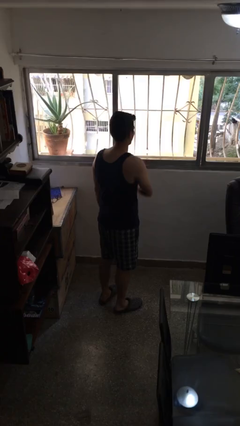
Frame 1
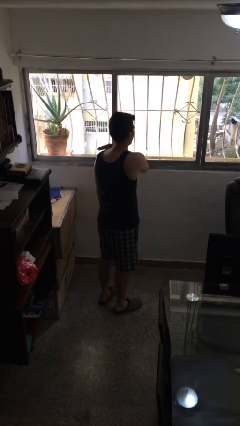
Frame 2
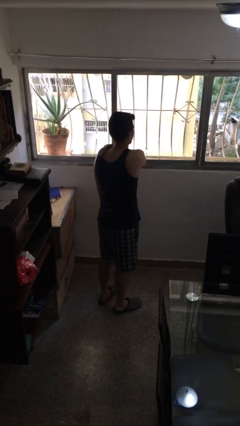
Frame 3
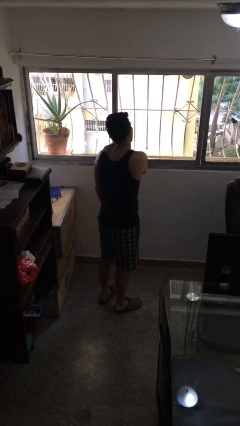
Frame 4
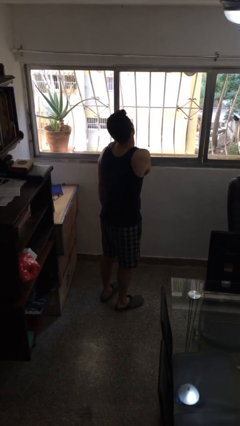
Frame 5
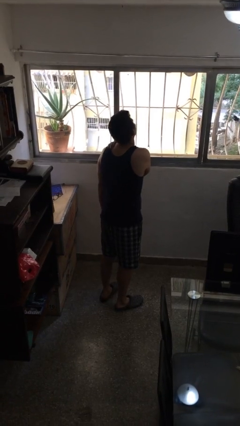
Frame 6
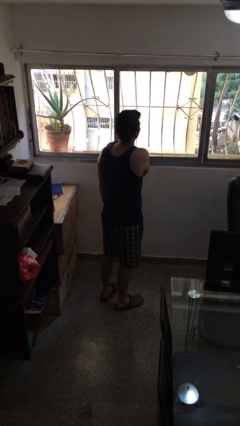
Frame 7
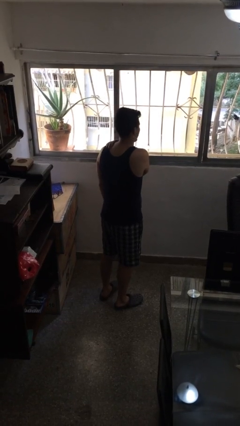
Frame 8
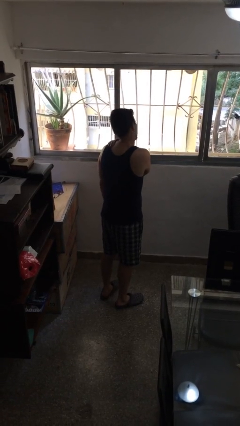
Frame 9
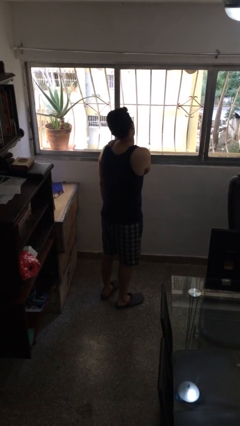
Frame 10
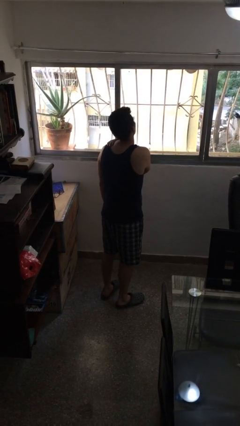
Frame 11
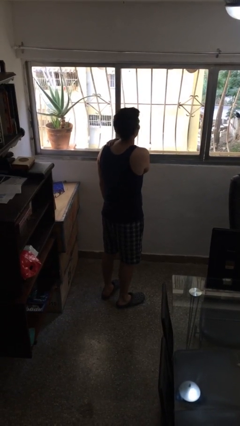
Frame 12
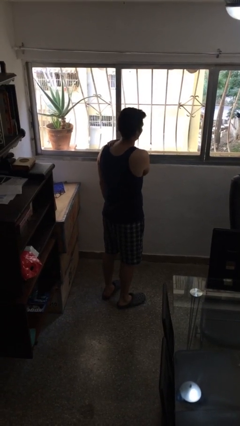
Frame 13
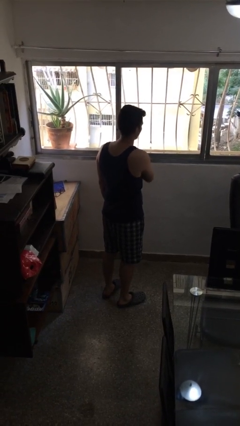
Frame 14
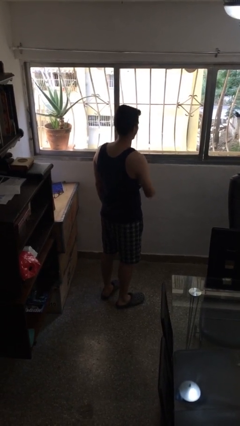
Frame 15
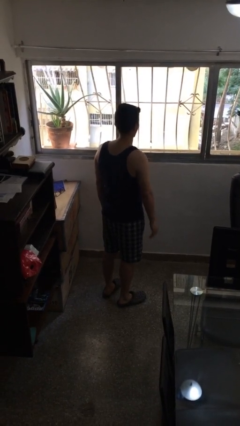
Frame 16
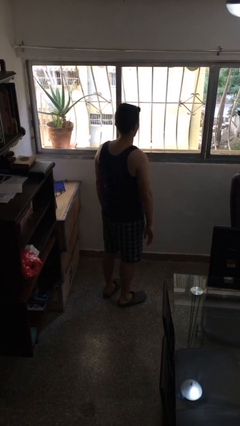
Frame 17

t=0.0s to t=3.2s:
person rubs neck

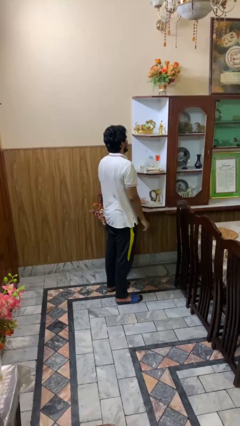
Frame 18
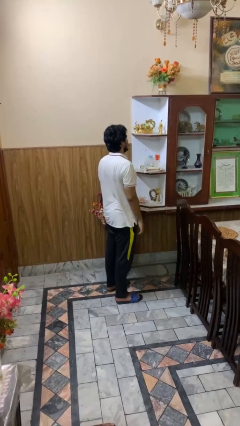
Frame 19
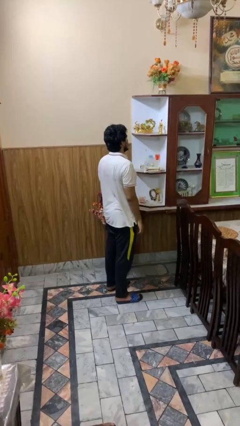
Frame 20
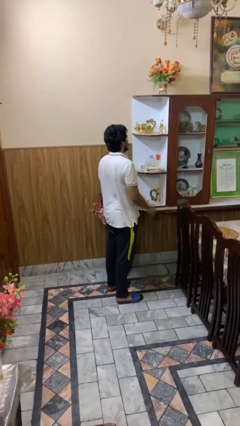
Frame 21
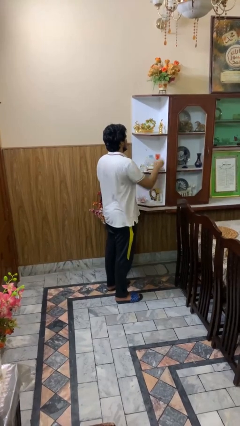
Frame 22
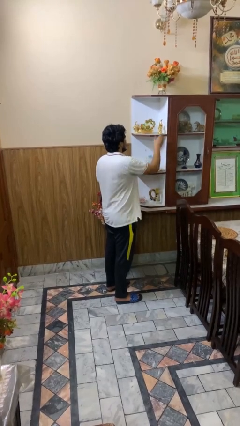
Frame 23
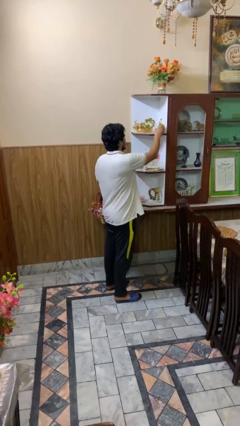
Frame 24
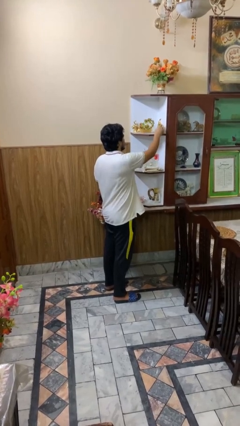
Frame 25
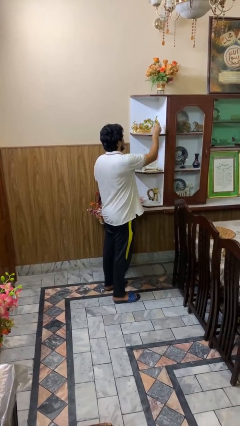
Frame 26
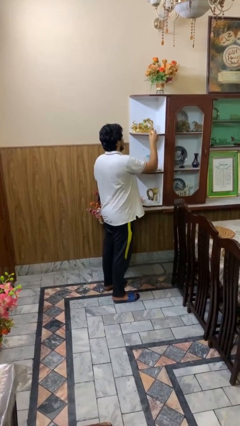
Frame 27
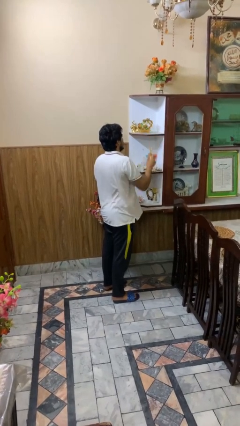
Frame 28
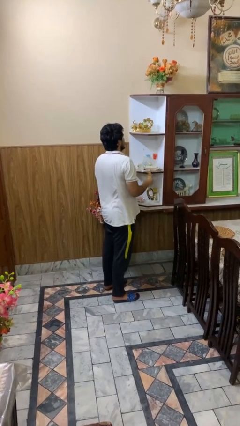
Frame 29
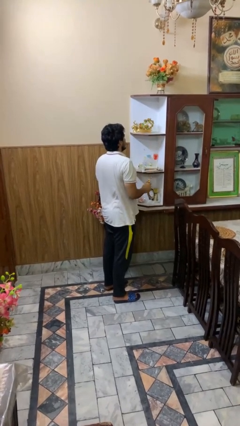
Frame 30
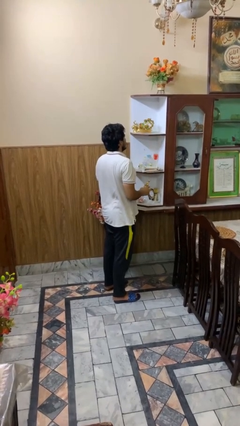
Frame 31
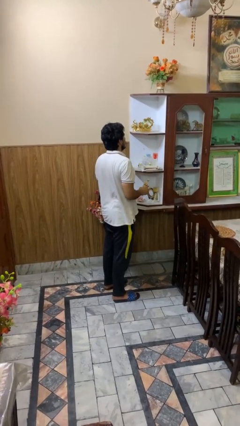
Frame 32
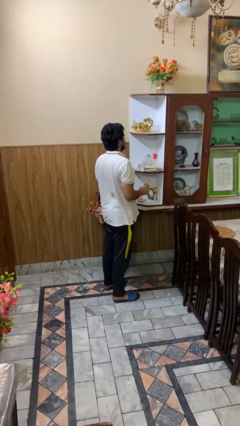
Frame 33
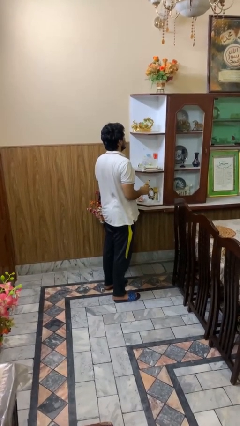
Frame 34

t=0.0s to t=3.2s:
person picks up object from shelf

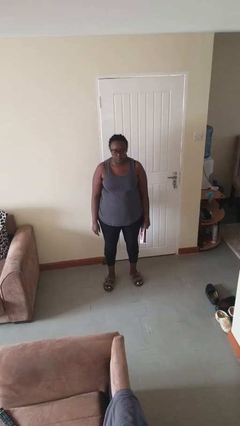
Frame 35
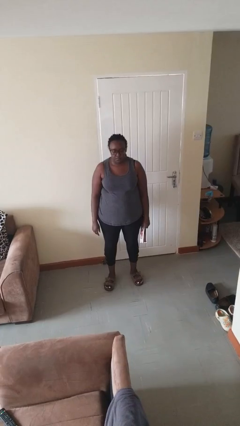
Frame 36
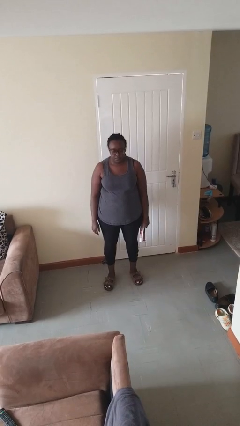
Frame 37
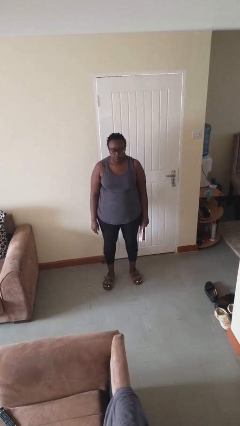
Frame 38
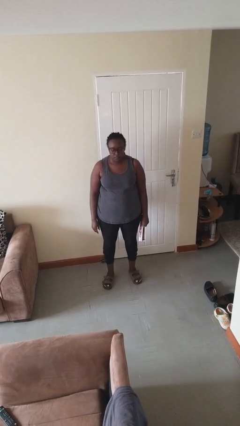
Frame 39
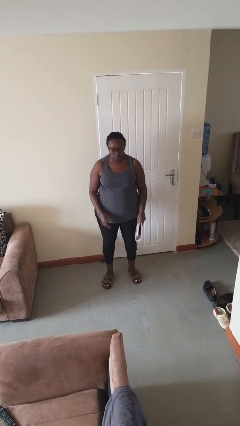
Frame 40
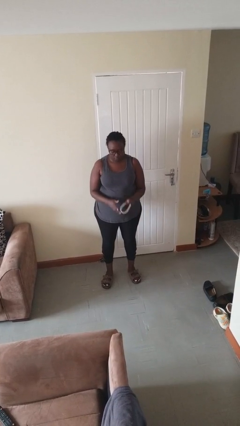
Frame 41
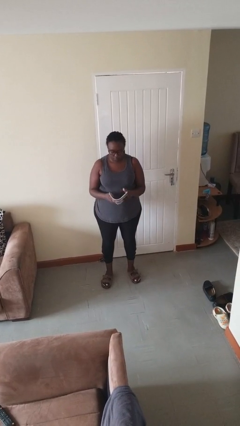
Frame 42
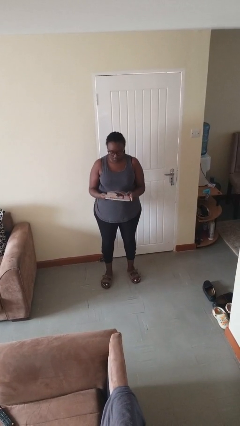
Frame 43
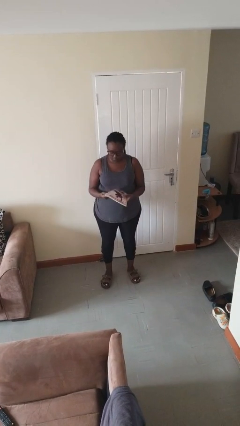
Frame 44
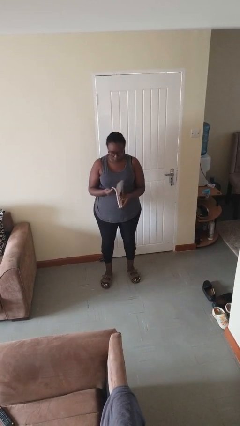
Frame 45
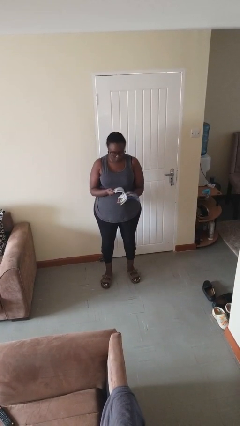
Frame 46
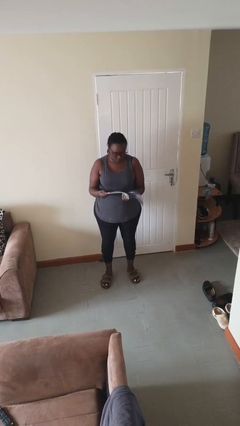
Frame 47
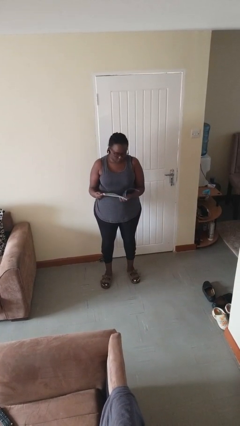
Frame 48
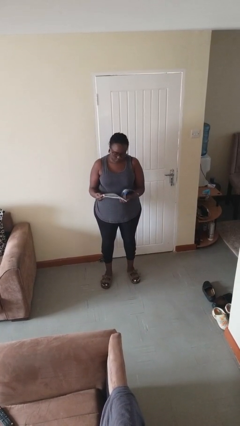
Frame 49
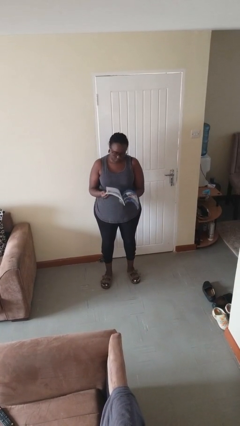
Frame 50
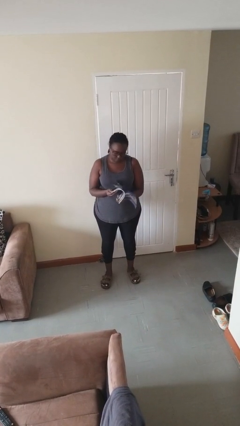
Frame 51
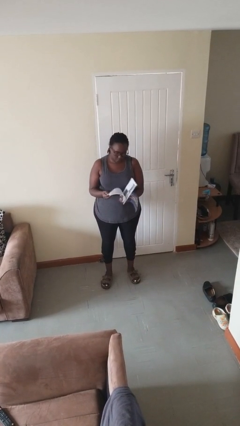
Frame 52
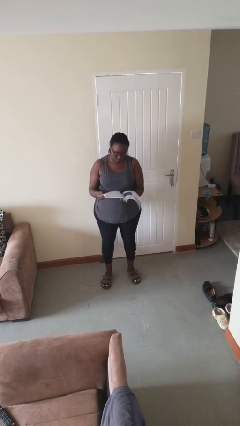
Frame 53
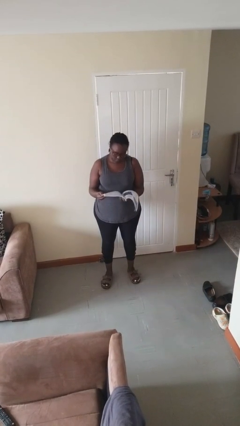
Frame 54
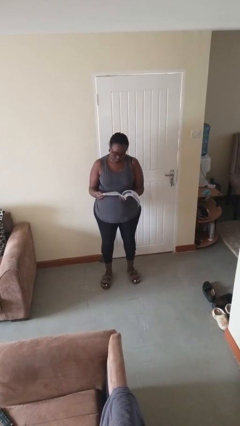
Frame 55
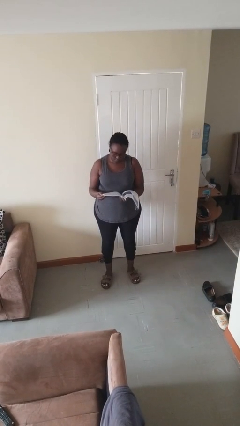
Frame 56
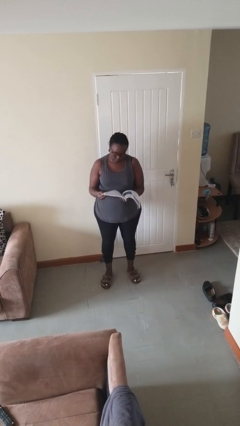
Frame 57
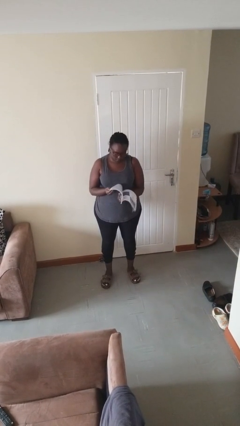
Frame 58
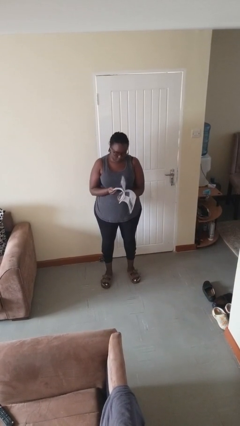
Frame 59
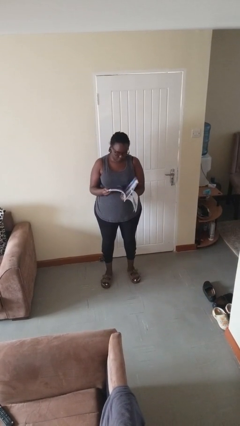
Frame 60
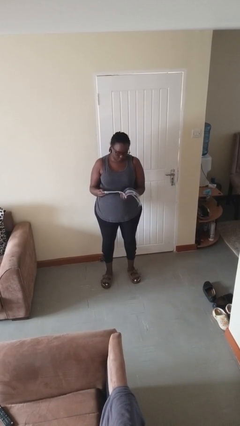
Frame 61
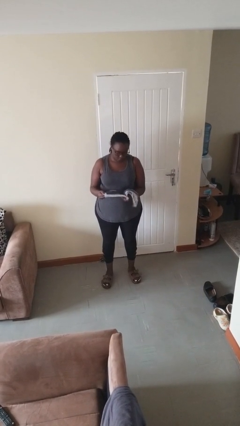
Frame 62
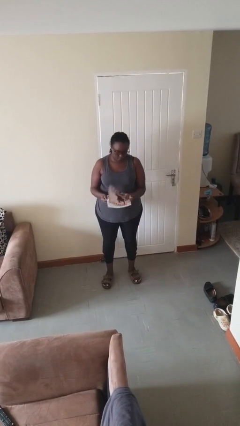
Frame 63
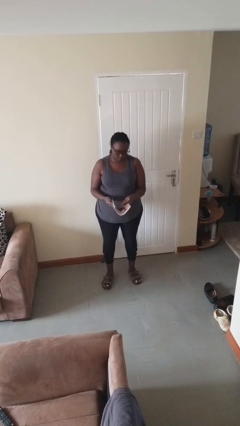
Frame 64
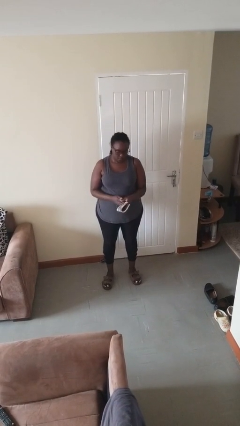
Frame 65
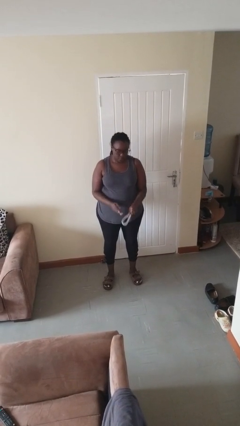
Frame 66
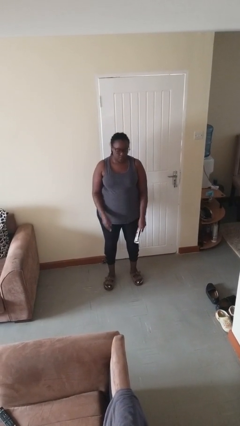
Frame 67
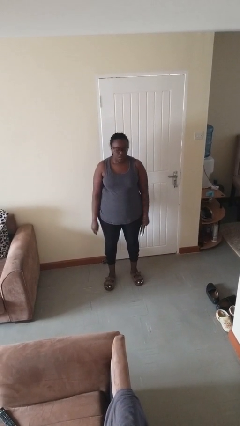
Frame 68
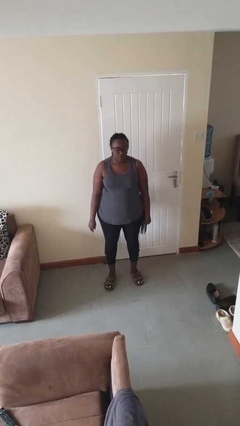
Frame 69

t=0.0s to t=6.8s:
person reads magazine

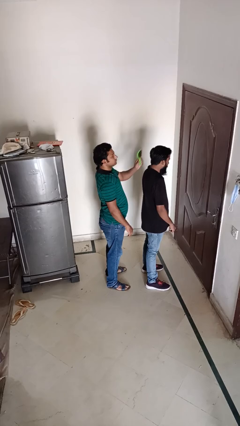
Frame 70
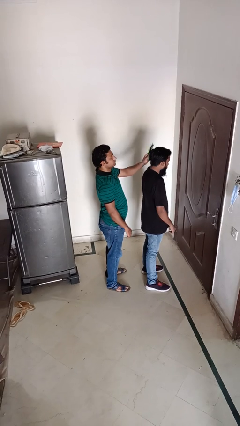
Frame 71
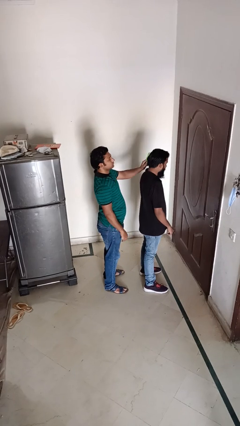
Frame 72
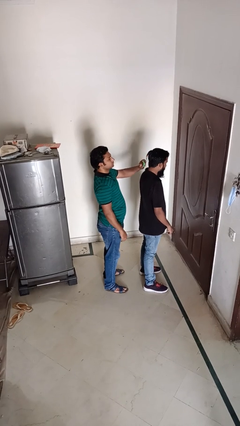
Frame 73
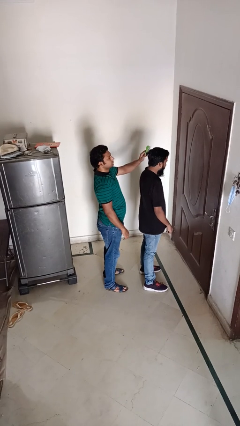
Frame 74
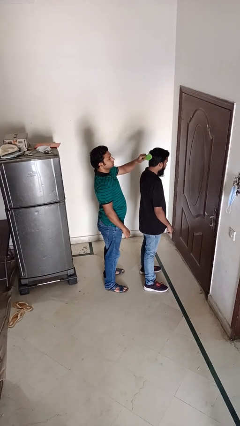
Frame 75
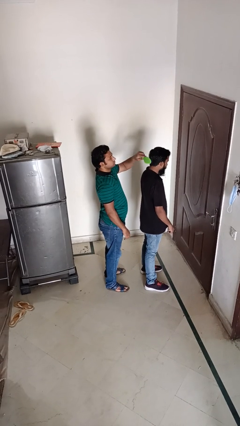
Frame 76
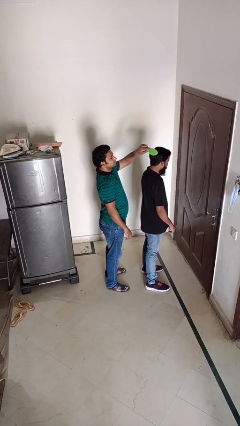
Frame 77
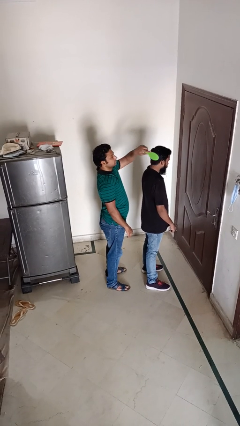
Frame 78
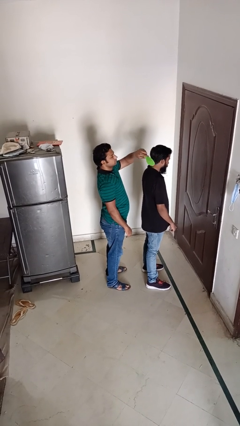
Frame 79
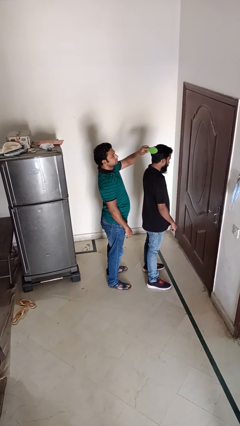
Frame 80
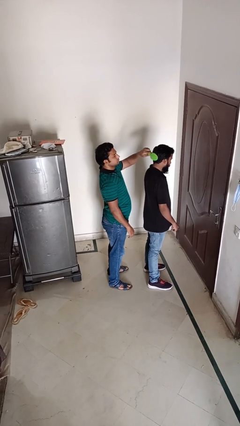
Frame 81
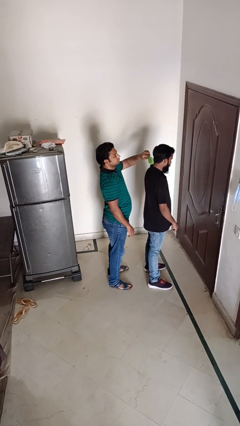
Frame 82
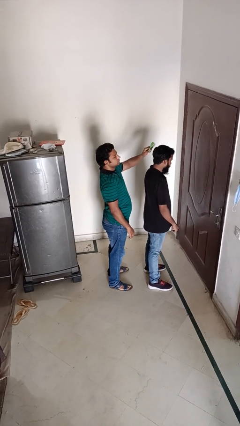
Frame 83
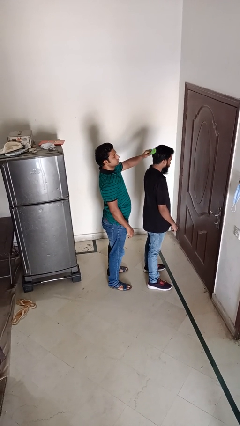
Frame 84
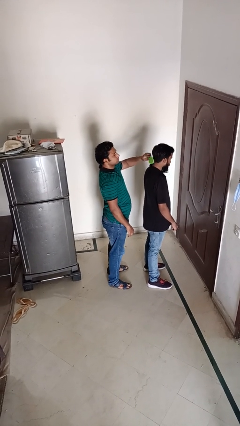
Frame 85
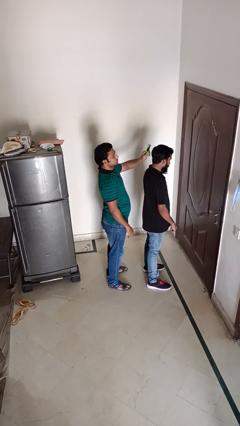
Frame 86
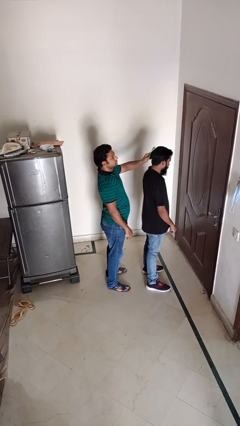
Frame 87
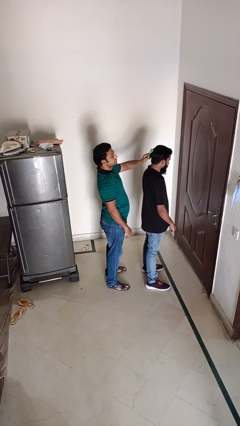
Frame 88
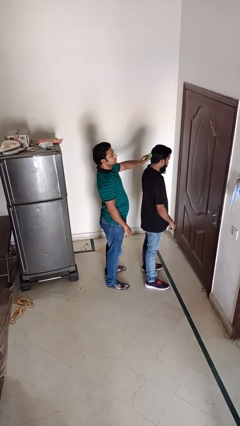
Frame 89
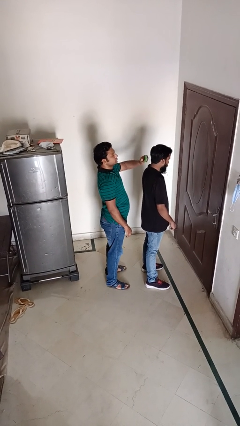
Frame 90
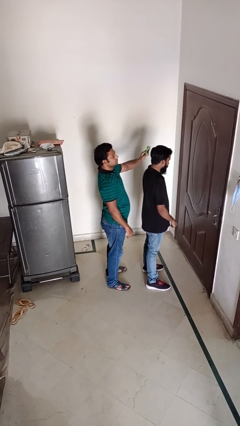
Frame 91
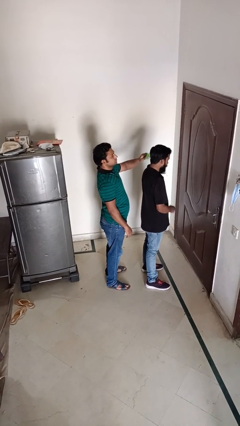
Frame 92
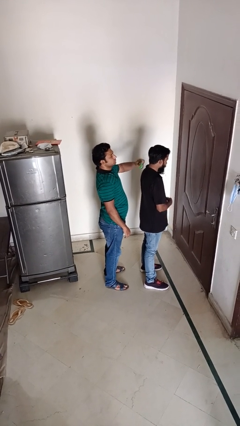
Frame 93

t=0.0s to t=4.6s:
person brushes hair of person

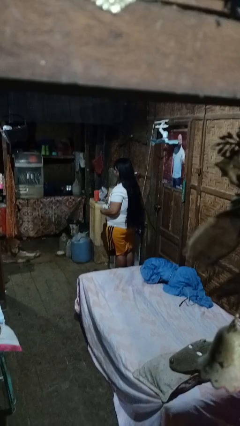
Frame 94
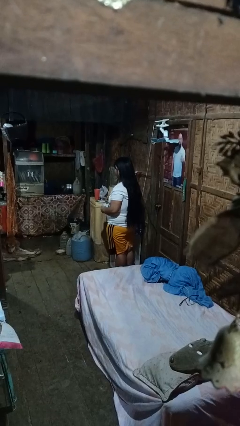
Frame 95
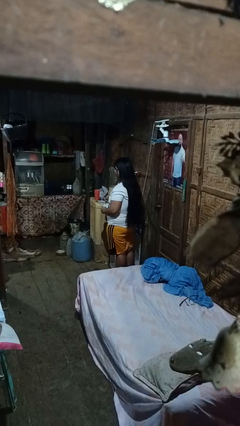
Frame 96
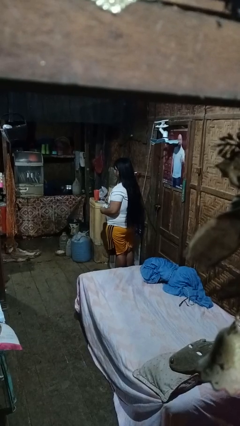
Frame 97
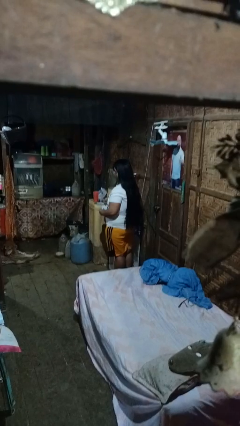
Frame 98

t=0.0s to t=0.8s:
person stirs mug
